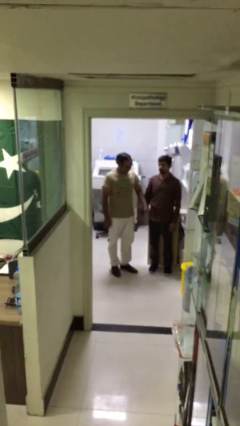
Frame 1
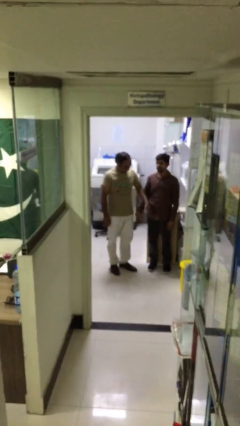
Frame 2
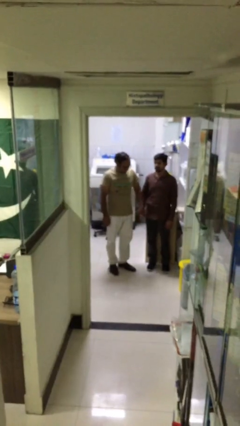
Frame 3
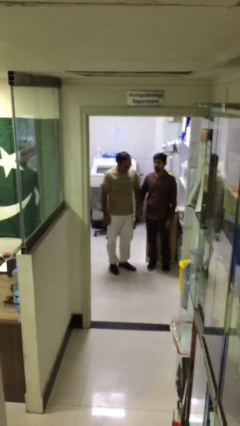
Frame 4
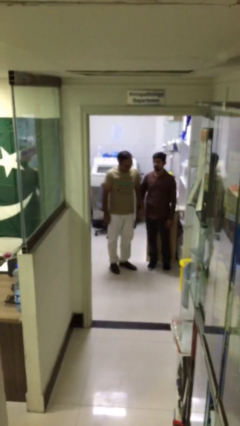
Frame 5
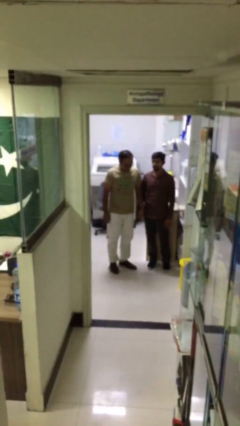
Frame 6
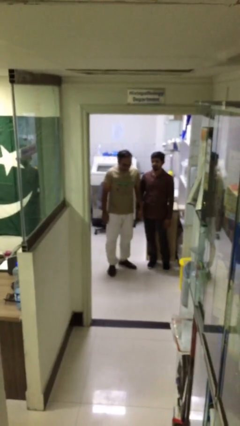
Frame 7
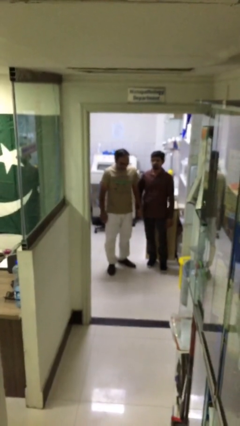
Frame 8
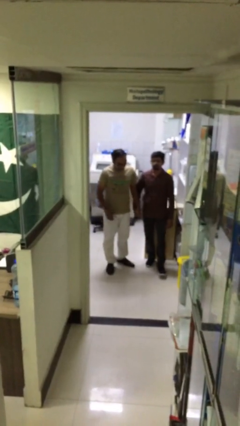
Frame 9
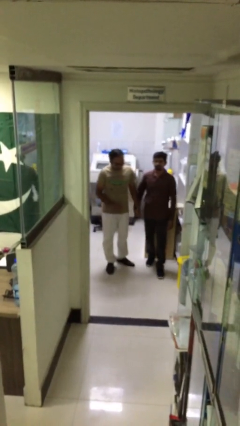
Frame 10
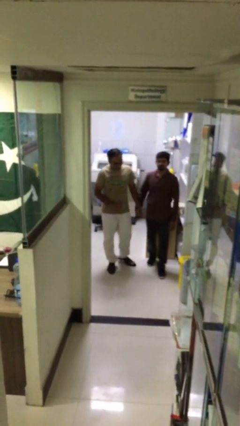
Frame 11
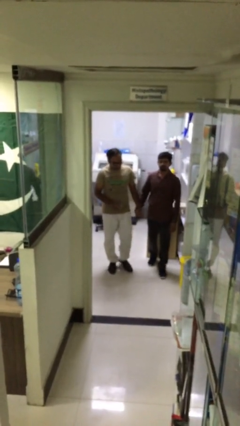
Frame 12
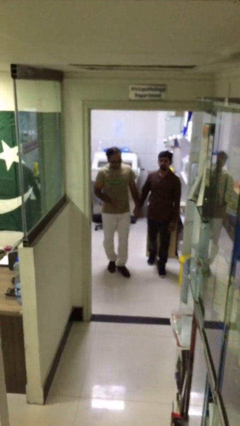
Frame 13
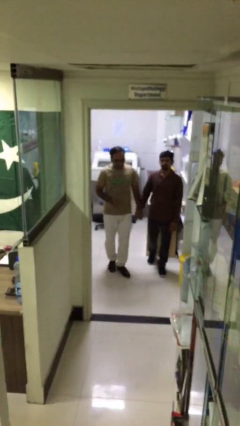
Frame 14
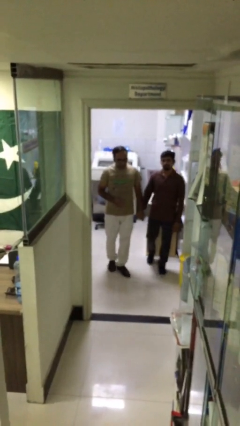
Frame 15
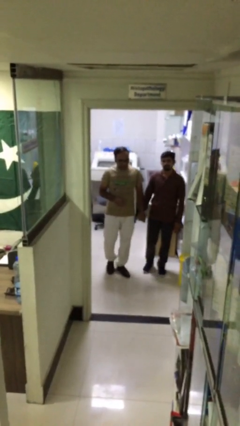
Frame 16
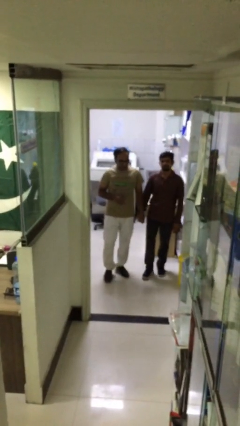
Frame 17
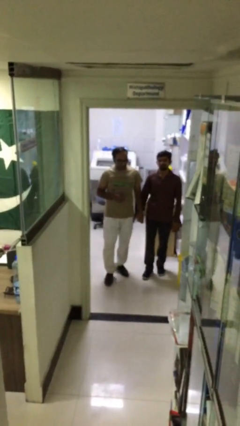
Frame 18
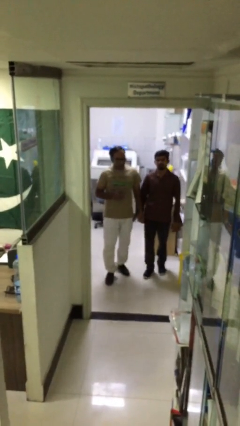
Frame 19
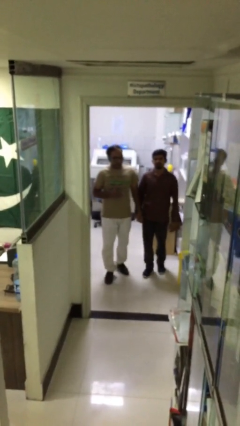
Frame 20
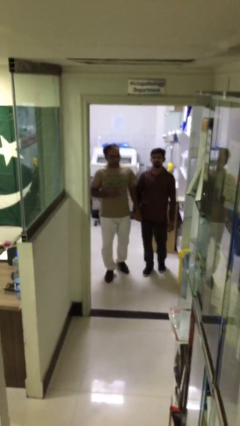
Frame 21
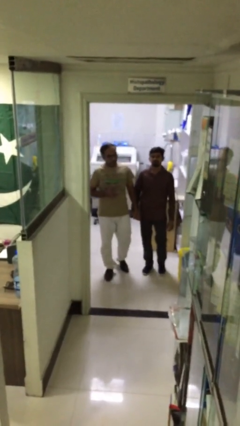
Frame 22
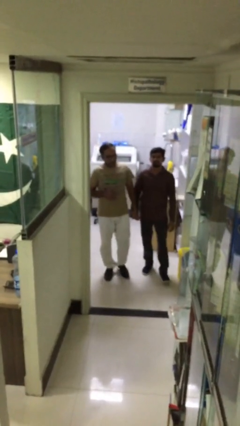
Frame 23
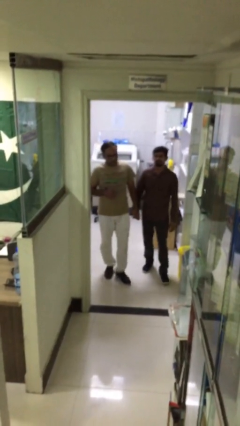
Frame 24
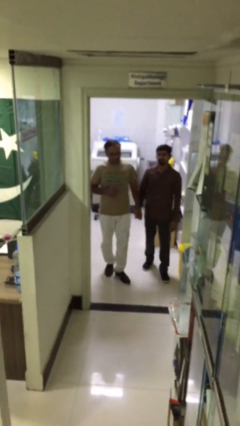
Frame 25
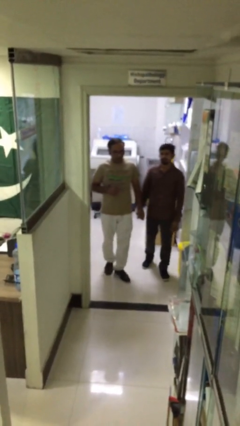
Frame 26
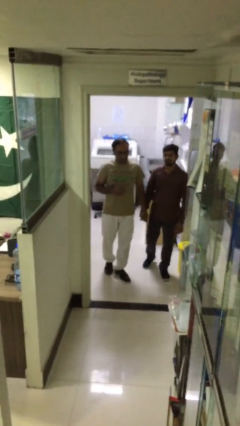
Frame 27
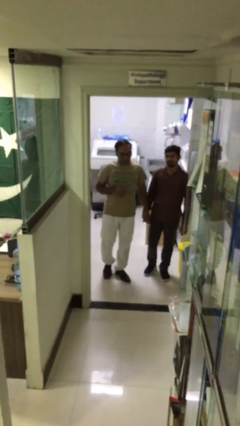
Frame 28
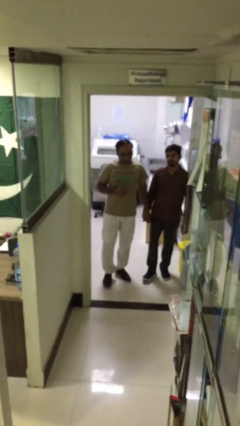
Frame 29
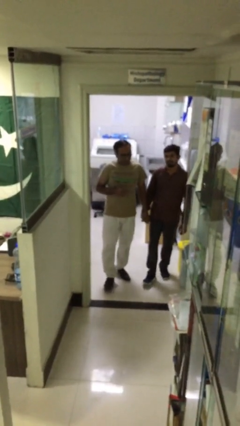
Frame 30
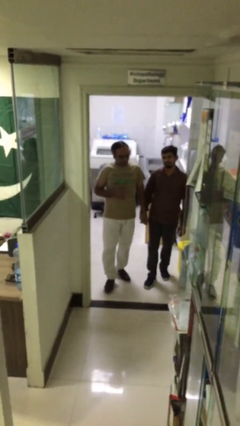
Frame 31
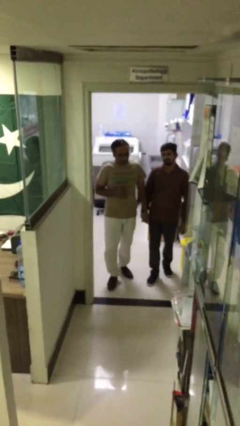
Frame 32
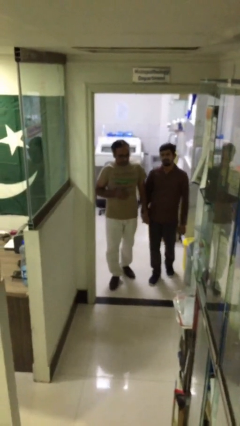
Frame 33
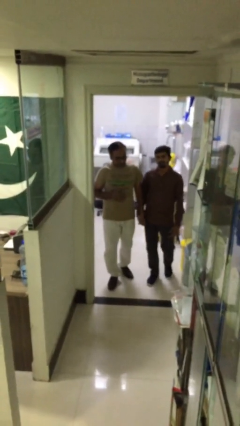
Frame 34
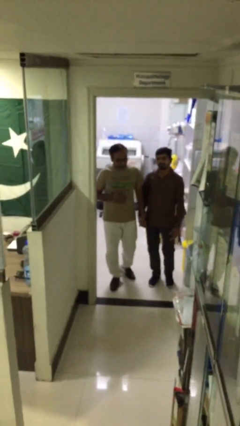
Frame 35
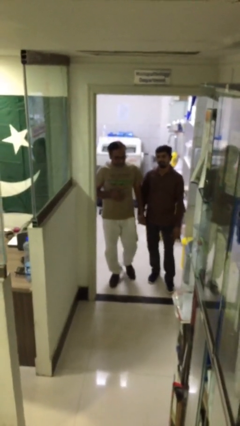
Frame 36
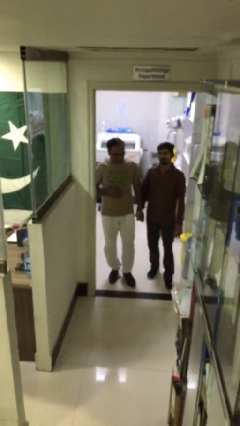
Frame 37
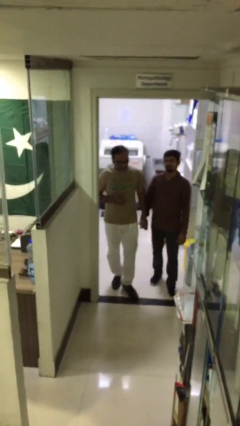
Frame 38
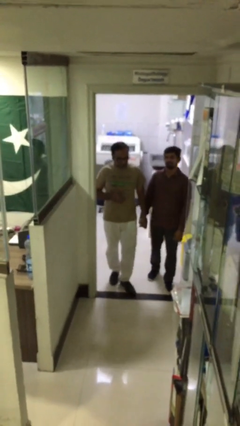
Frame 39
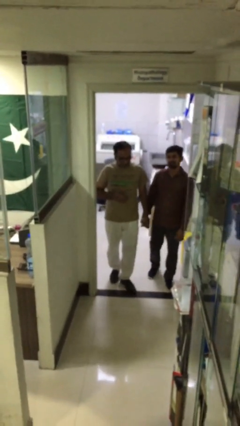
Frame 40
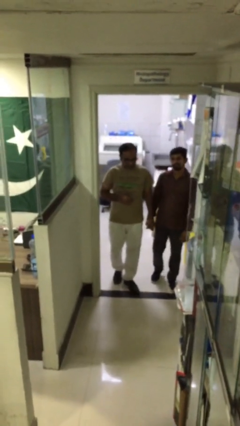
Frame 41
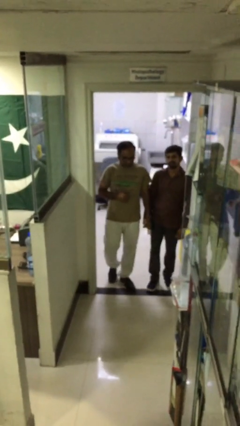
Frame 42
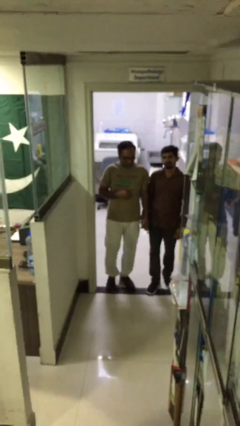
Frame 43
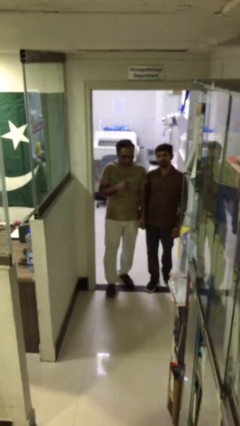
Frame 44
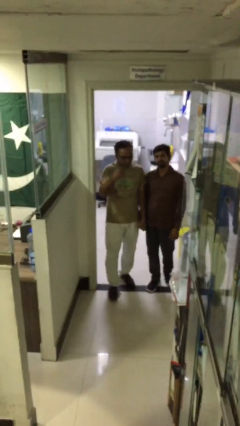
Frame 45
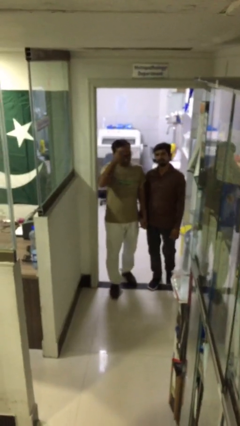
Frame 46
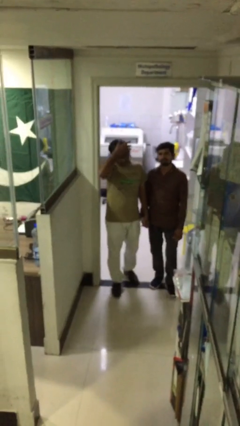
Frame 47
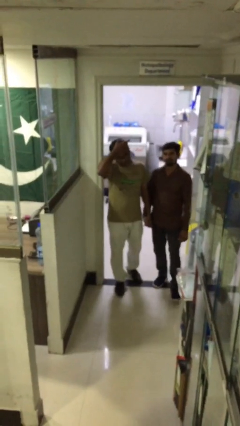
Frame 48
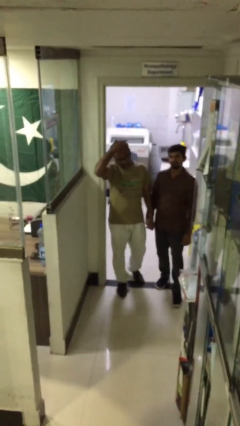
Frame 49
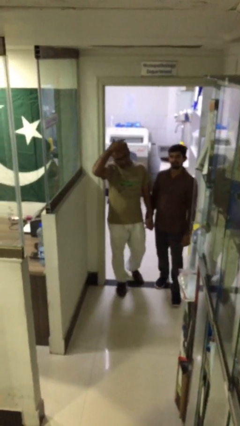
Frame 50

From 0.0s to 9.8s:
person holds hand

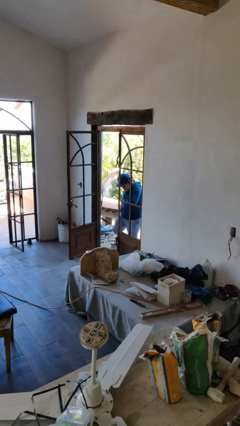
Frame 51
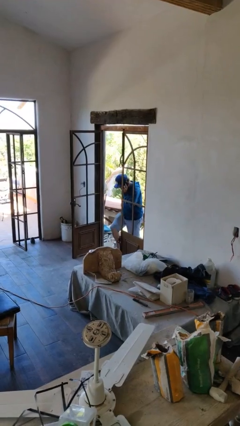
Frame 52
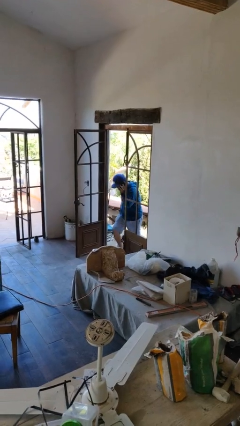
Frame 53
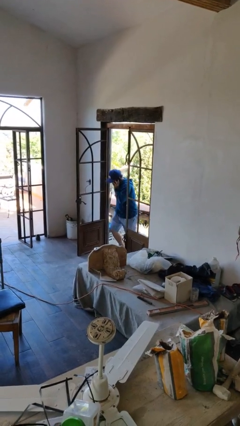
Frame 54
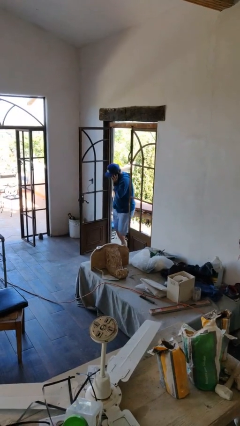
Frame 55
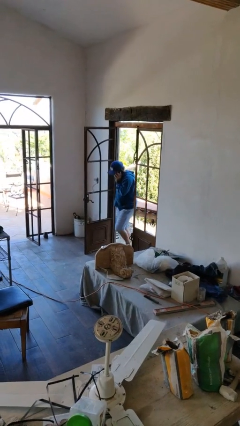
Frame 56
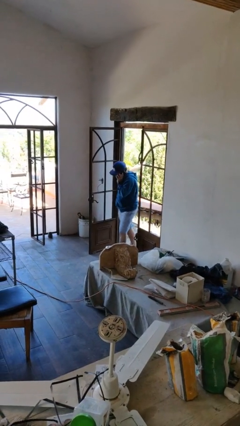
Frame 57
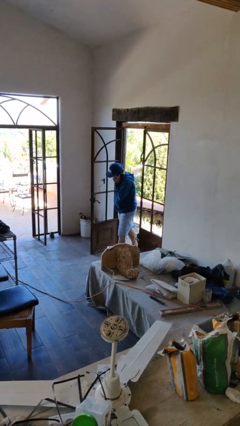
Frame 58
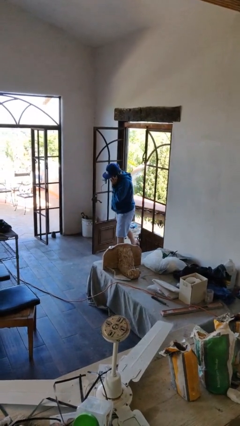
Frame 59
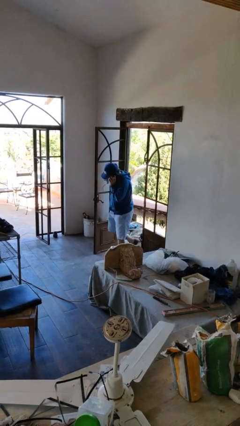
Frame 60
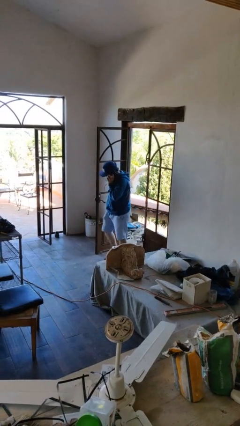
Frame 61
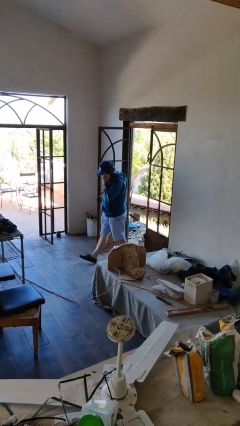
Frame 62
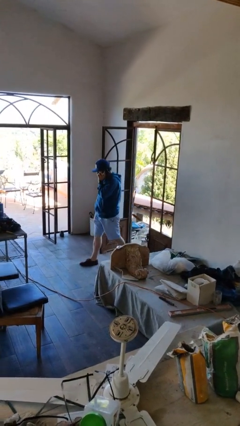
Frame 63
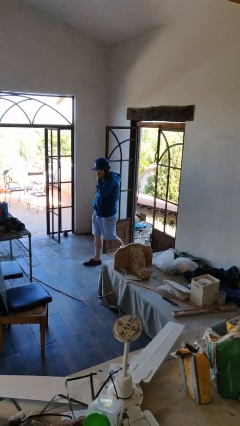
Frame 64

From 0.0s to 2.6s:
person enters scene through structure

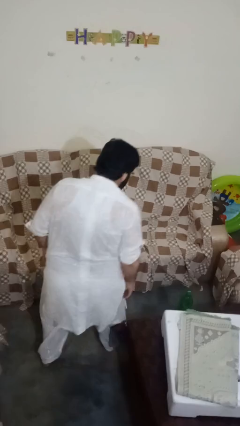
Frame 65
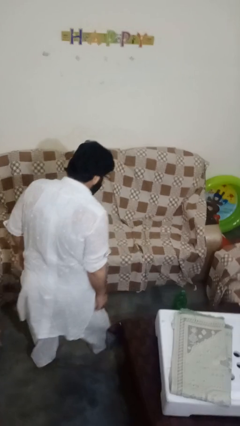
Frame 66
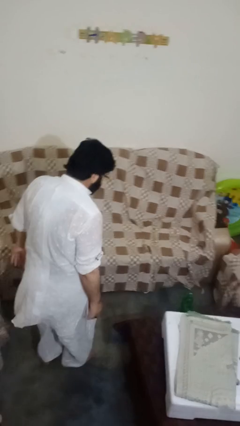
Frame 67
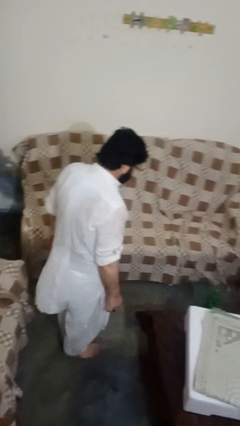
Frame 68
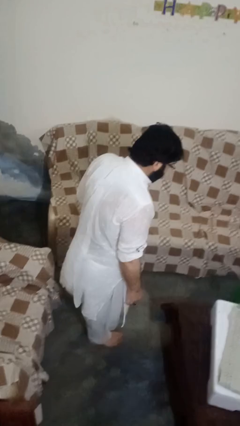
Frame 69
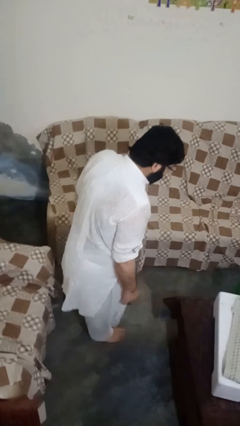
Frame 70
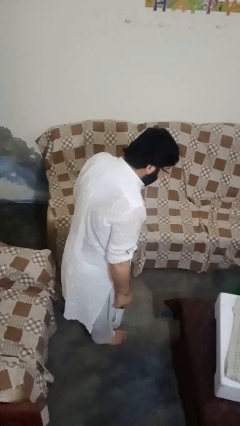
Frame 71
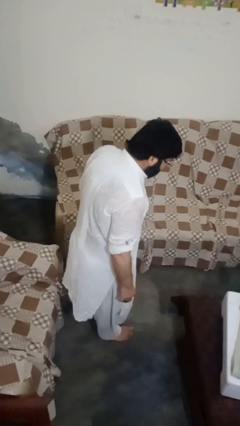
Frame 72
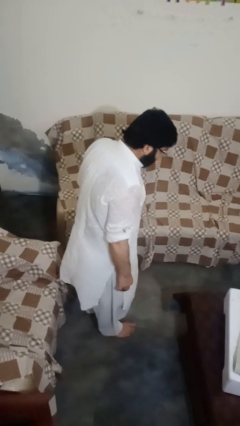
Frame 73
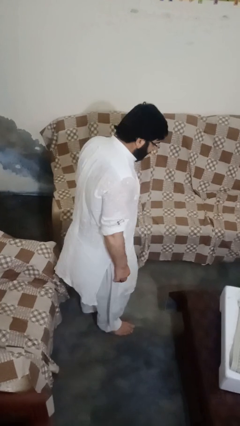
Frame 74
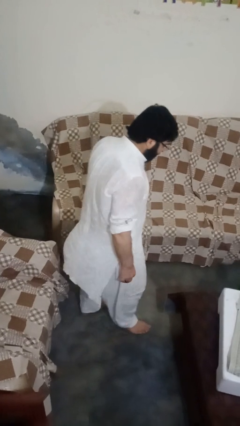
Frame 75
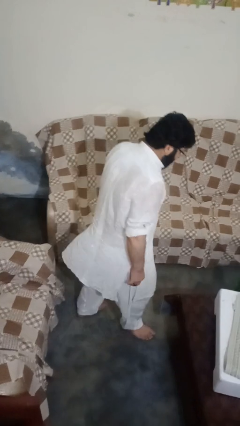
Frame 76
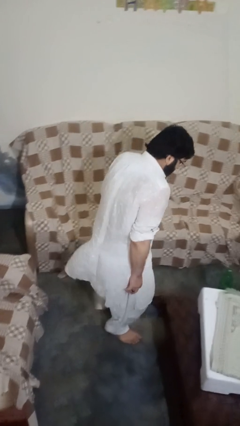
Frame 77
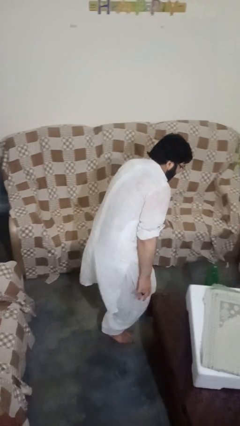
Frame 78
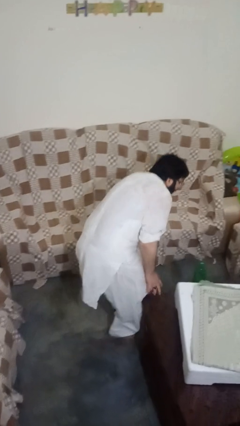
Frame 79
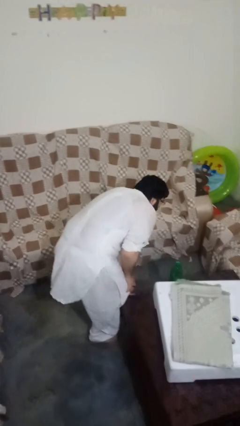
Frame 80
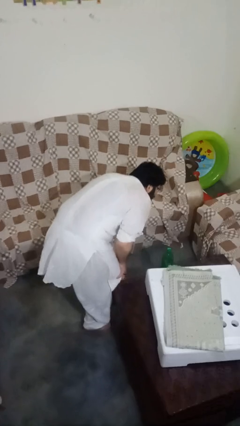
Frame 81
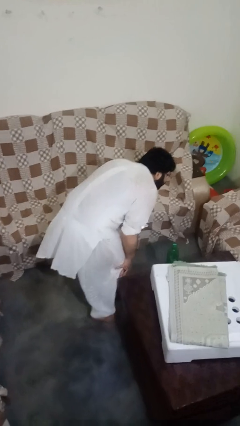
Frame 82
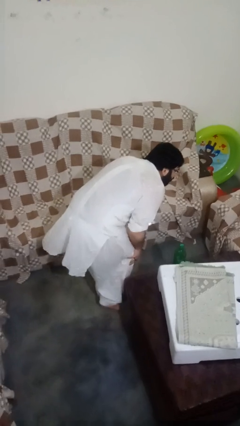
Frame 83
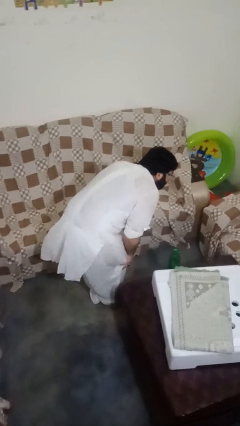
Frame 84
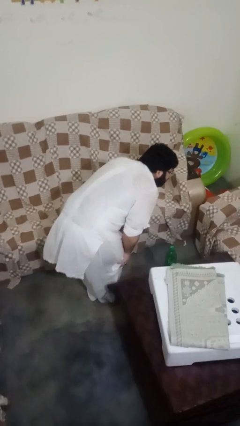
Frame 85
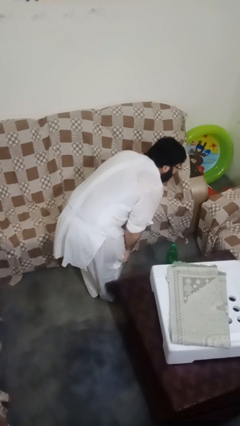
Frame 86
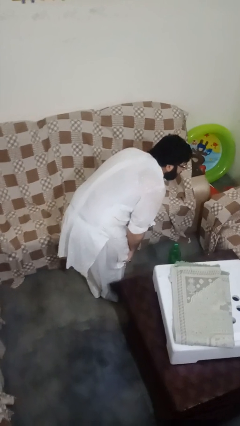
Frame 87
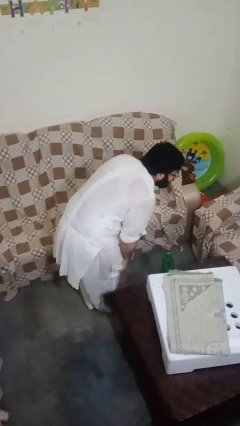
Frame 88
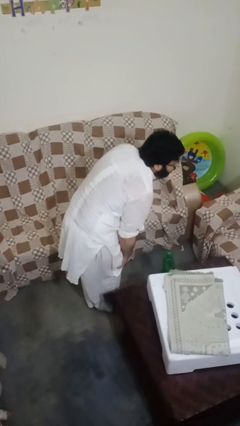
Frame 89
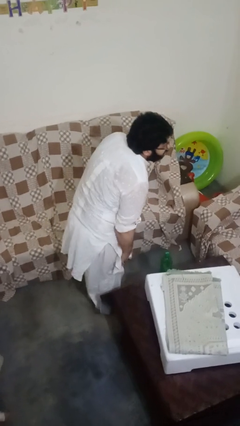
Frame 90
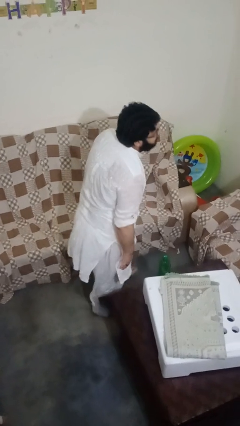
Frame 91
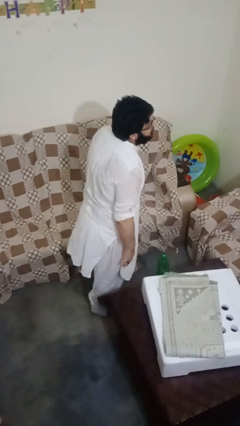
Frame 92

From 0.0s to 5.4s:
person bumps into table
